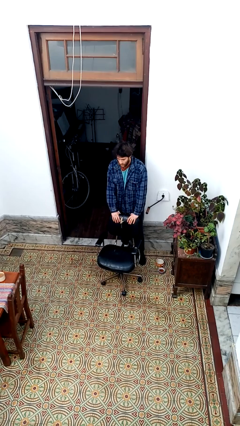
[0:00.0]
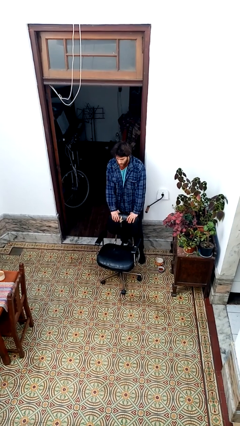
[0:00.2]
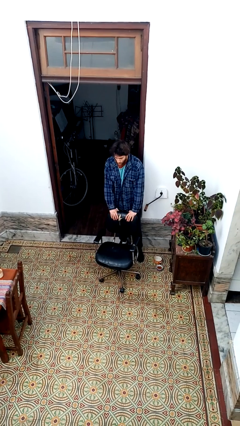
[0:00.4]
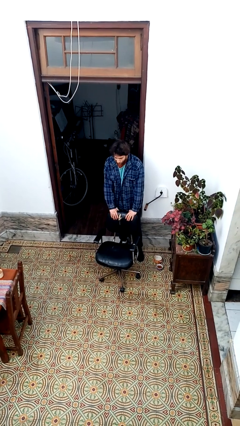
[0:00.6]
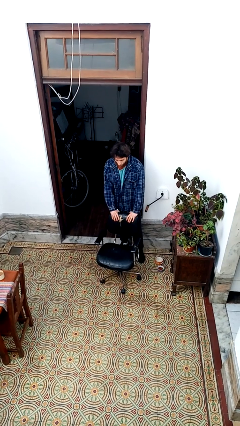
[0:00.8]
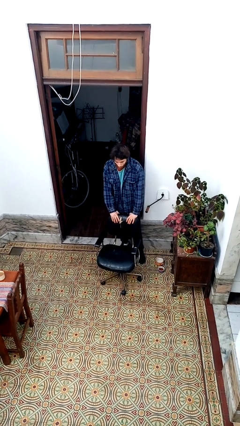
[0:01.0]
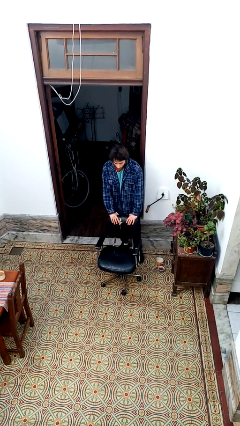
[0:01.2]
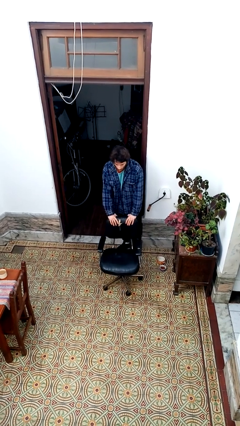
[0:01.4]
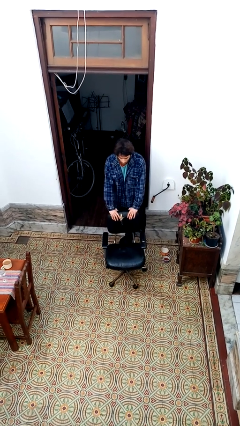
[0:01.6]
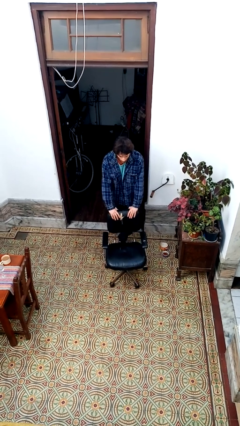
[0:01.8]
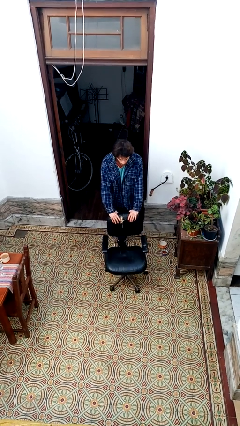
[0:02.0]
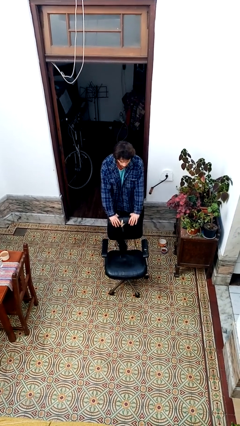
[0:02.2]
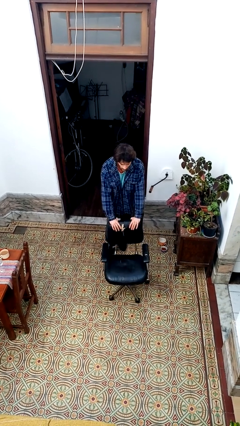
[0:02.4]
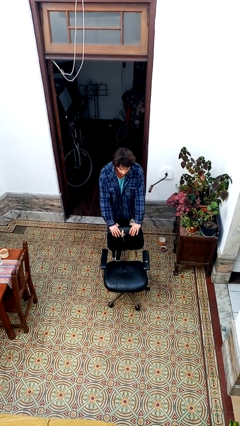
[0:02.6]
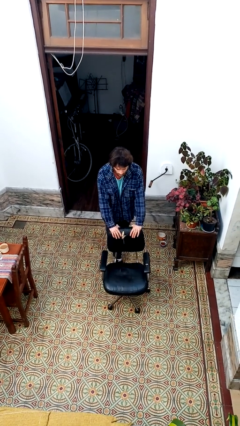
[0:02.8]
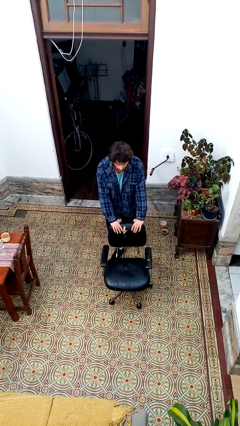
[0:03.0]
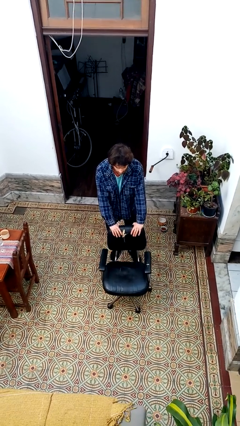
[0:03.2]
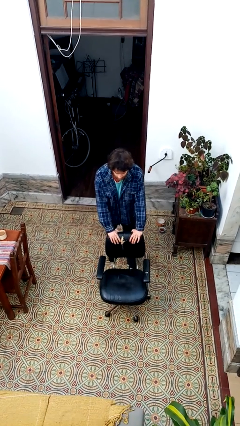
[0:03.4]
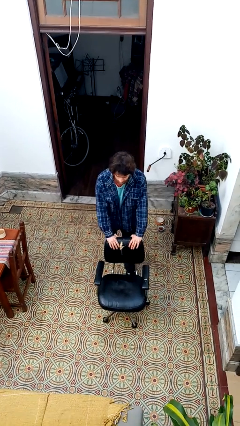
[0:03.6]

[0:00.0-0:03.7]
person pushes wheeled cart

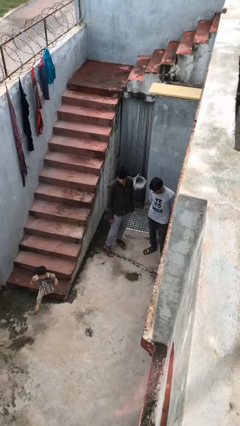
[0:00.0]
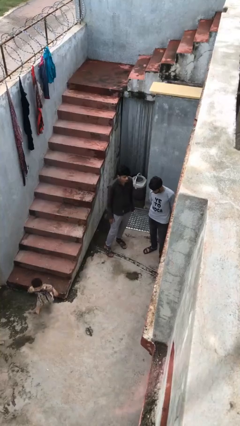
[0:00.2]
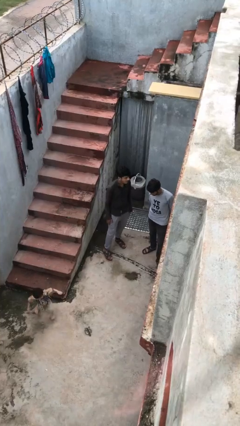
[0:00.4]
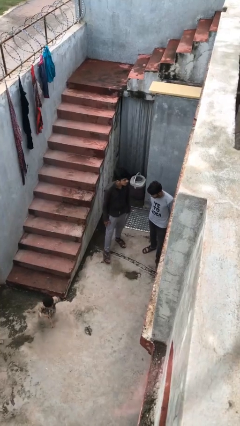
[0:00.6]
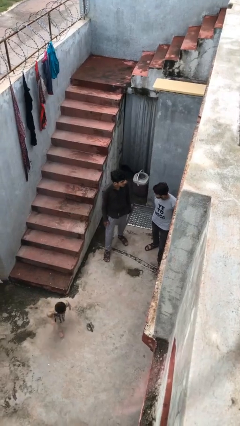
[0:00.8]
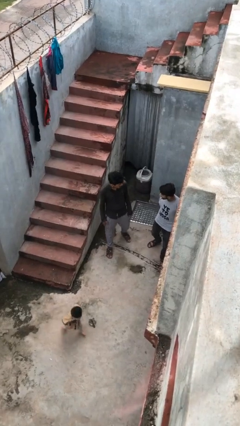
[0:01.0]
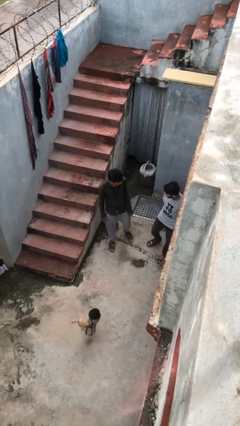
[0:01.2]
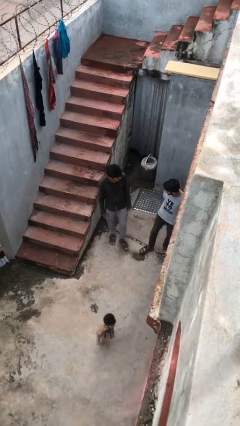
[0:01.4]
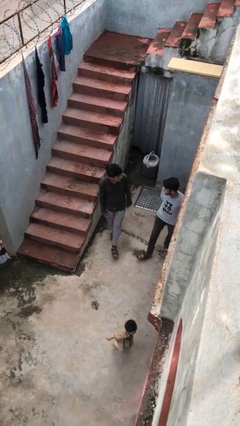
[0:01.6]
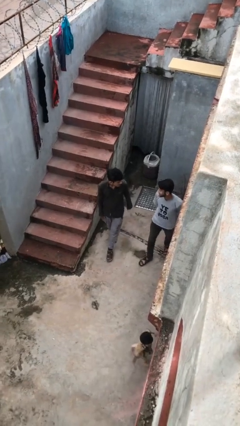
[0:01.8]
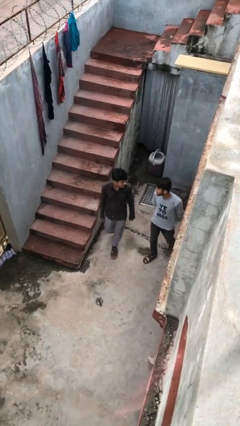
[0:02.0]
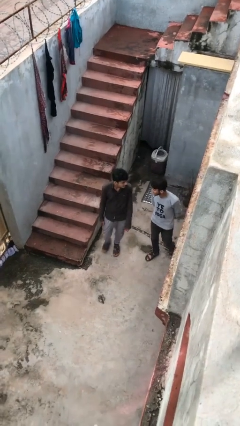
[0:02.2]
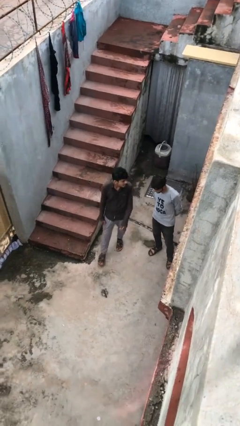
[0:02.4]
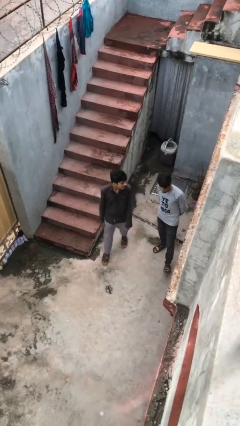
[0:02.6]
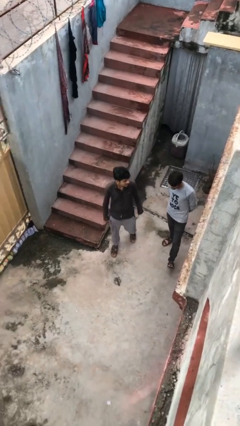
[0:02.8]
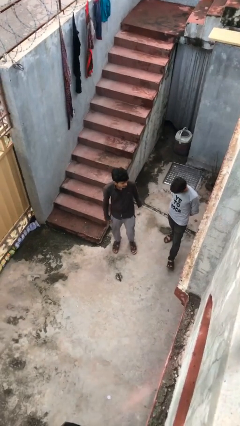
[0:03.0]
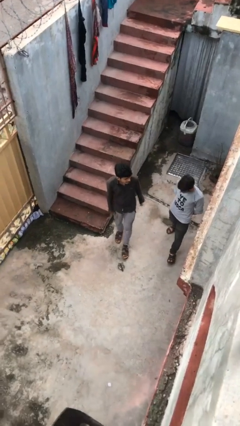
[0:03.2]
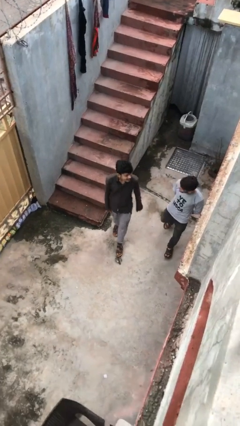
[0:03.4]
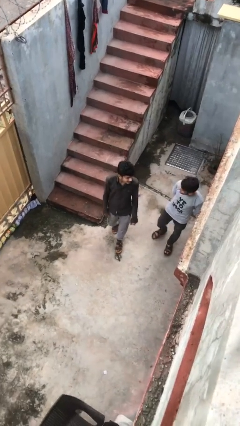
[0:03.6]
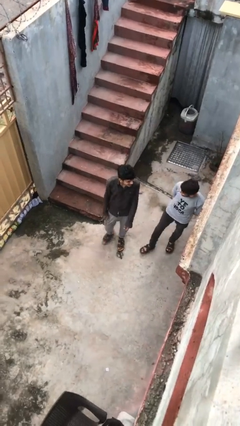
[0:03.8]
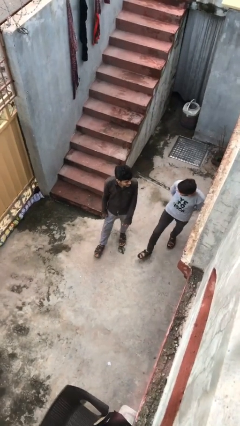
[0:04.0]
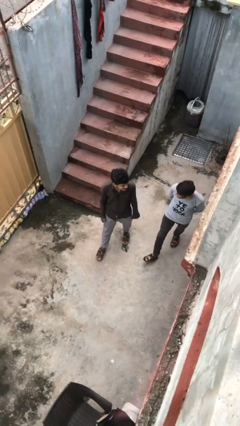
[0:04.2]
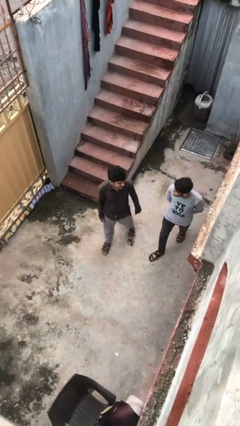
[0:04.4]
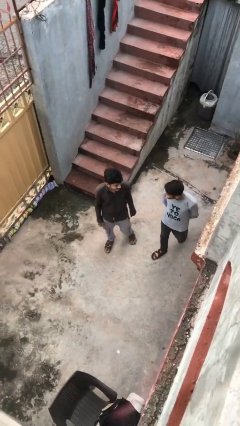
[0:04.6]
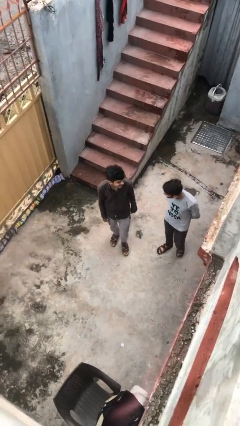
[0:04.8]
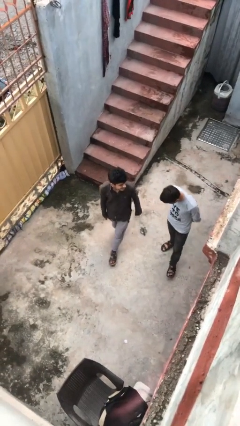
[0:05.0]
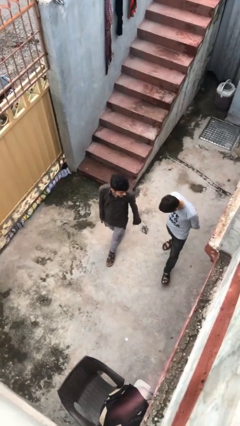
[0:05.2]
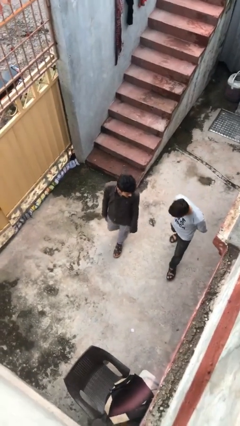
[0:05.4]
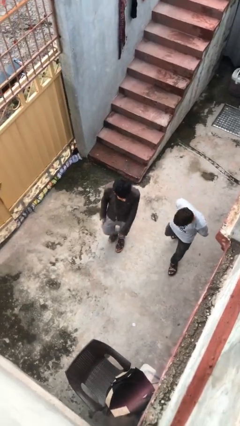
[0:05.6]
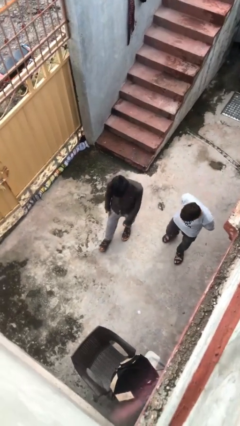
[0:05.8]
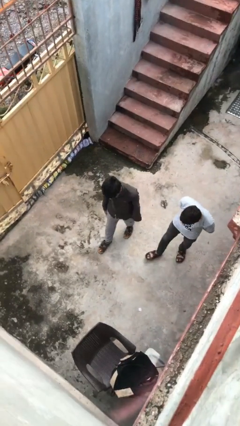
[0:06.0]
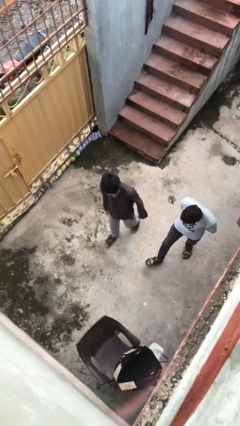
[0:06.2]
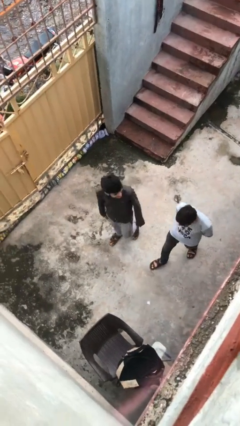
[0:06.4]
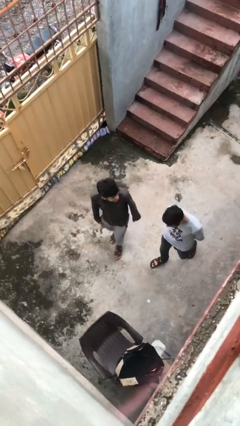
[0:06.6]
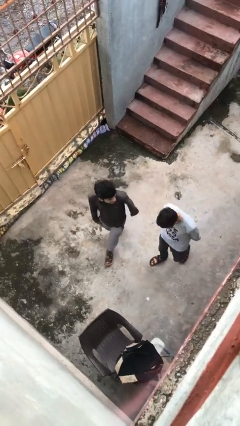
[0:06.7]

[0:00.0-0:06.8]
person talks to person

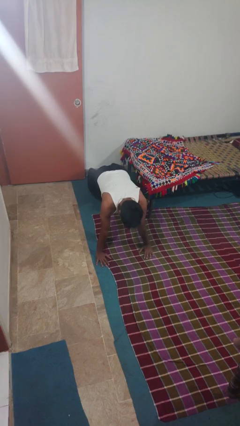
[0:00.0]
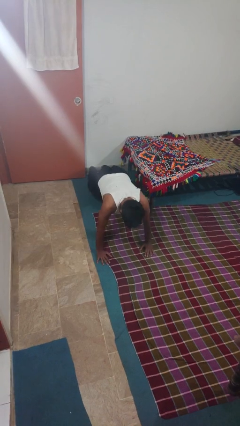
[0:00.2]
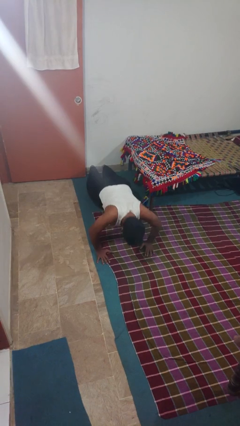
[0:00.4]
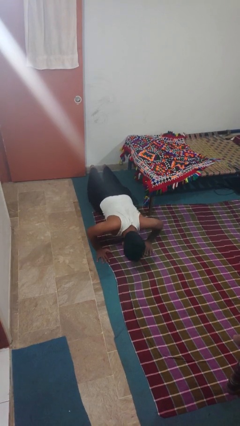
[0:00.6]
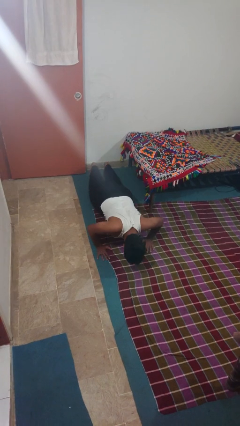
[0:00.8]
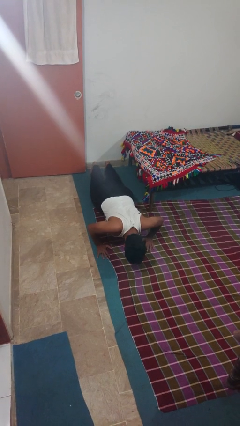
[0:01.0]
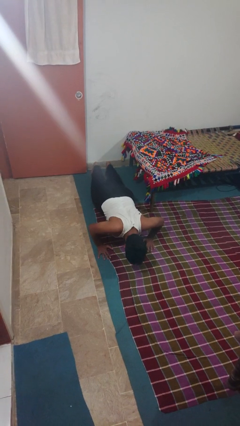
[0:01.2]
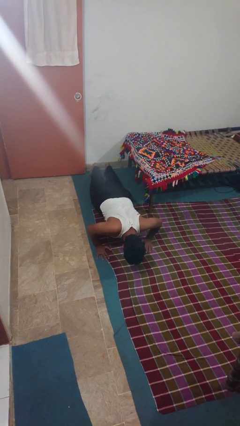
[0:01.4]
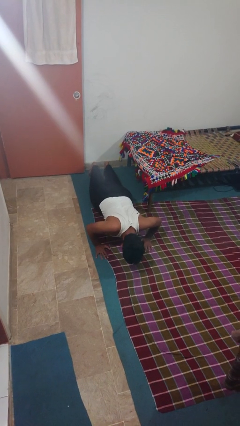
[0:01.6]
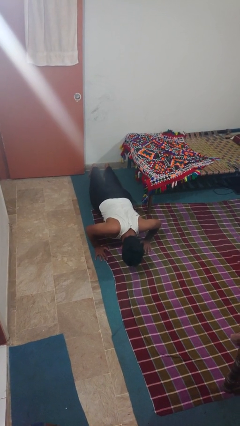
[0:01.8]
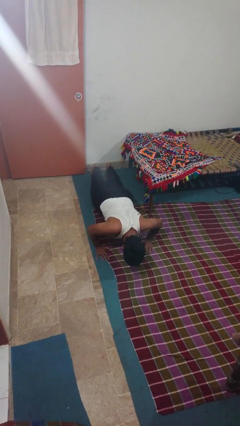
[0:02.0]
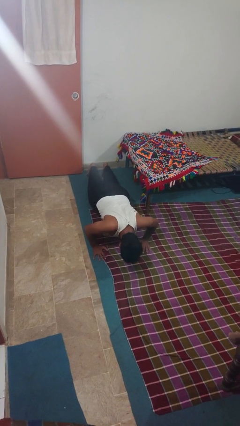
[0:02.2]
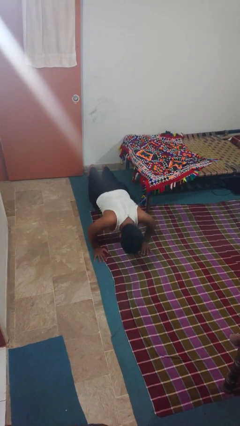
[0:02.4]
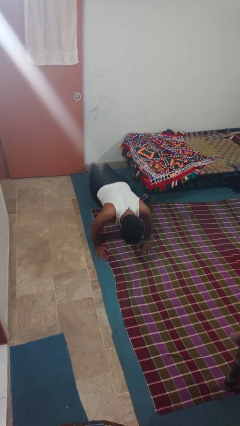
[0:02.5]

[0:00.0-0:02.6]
person exercises with pushup

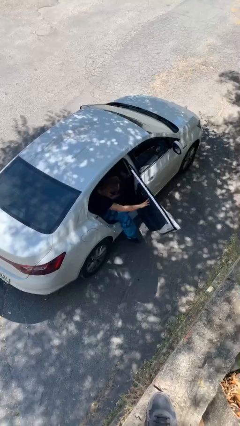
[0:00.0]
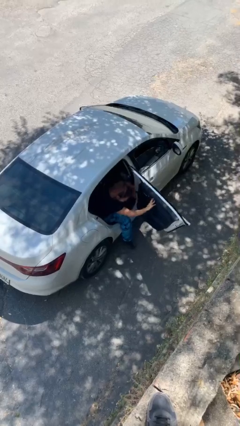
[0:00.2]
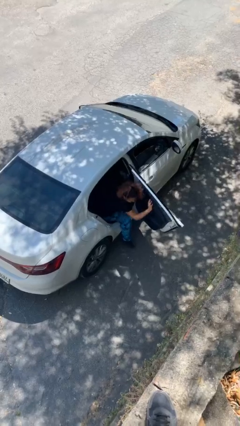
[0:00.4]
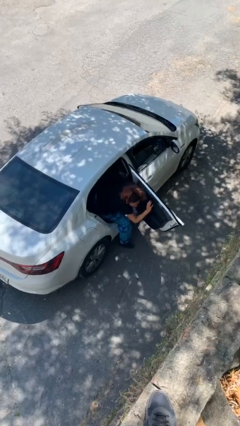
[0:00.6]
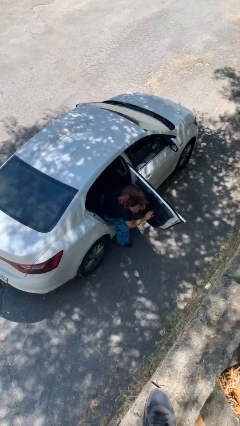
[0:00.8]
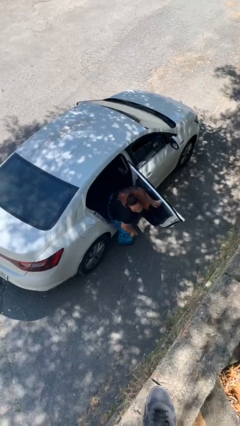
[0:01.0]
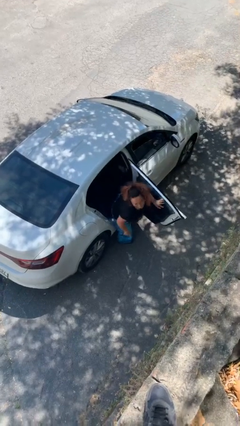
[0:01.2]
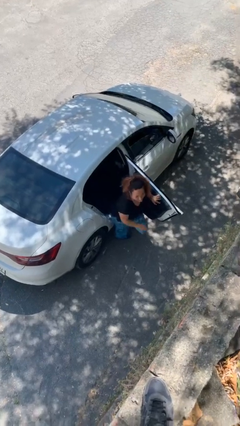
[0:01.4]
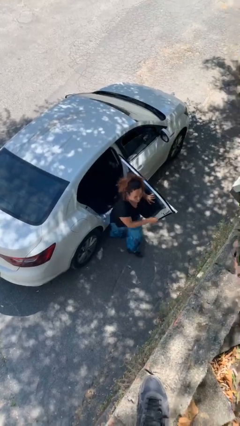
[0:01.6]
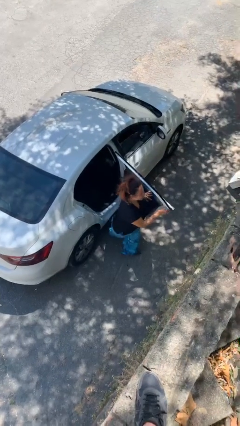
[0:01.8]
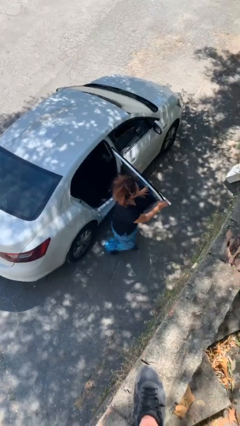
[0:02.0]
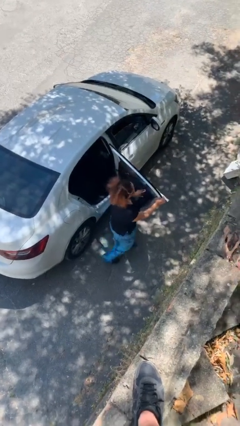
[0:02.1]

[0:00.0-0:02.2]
person exits car

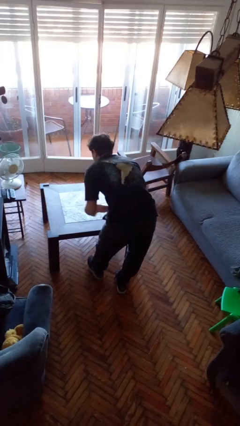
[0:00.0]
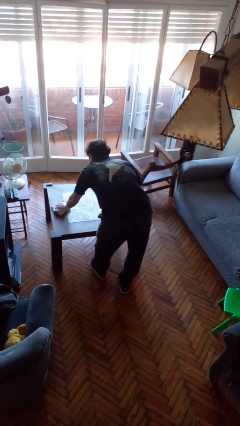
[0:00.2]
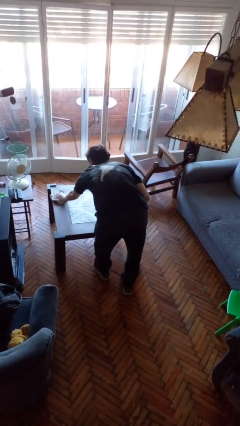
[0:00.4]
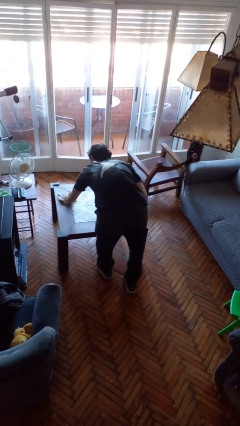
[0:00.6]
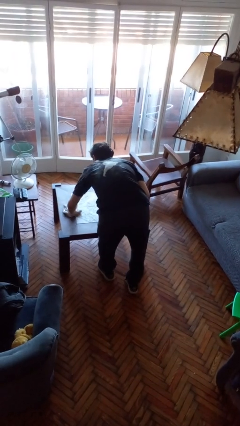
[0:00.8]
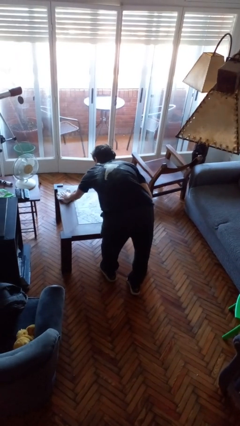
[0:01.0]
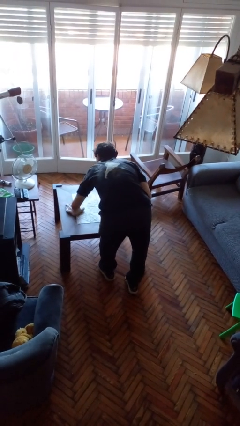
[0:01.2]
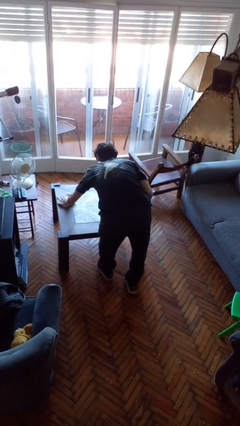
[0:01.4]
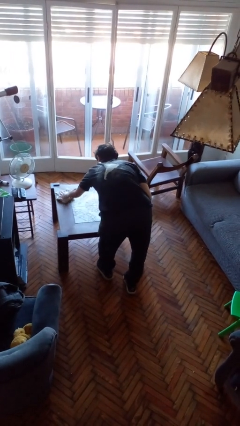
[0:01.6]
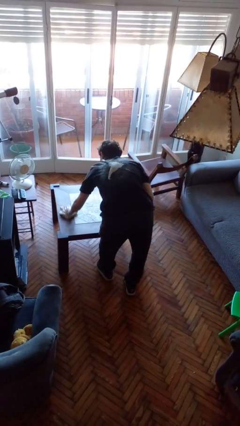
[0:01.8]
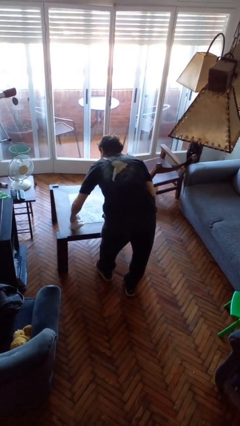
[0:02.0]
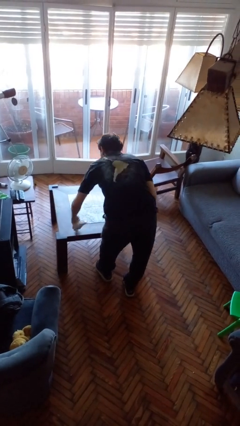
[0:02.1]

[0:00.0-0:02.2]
person cleans table with rag

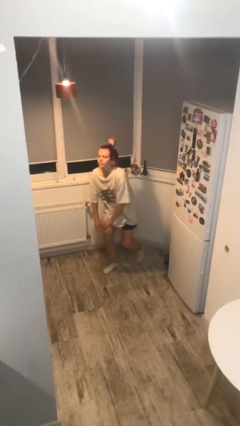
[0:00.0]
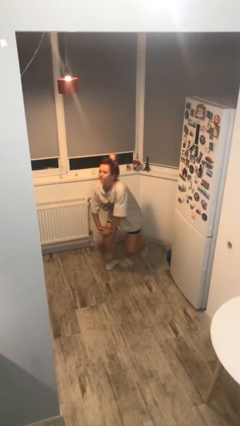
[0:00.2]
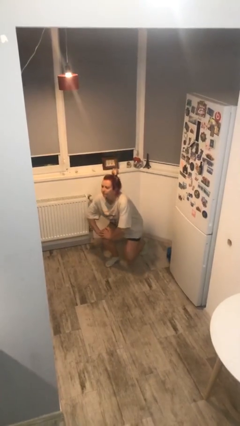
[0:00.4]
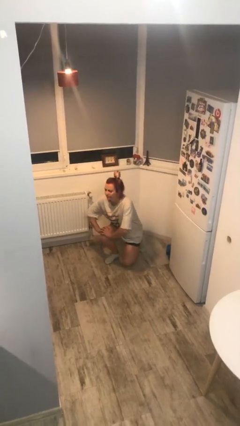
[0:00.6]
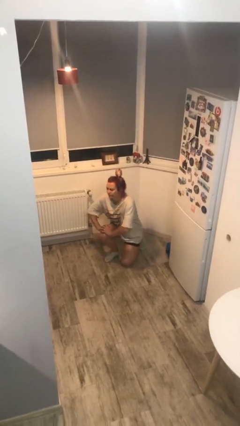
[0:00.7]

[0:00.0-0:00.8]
person kneels
